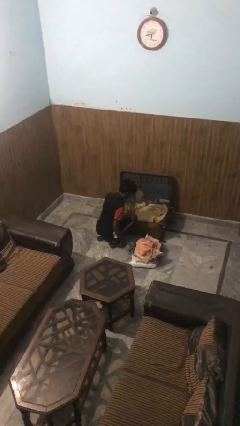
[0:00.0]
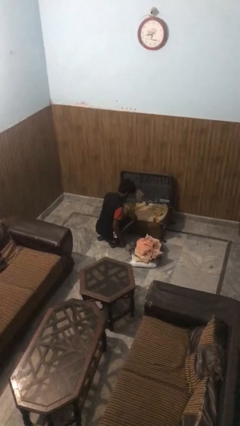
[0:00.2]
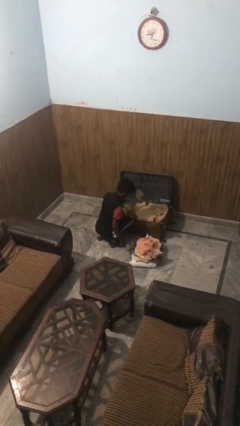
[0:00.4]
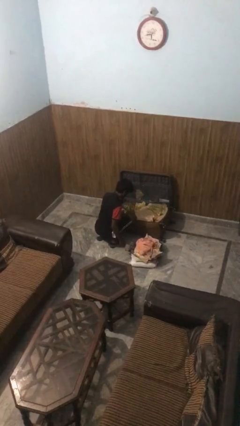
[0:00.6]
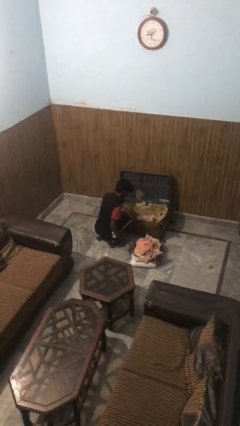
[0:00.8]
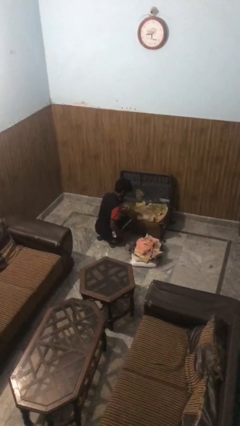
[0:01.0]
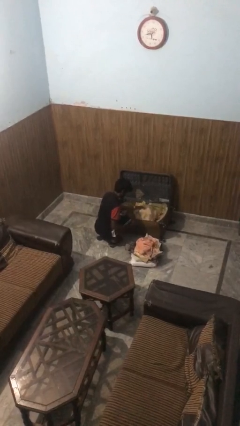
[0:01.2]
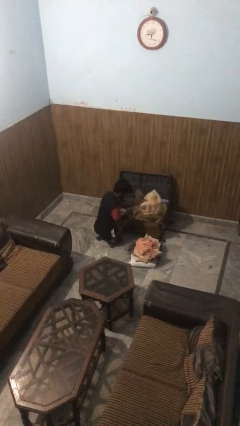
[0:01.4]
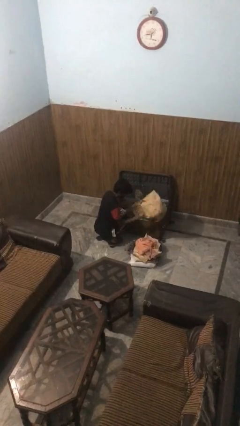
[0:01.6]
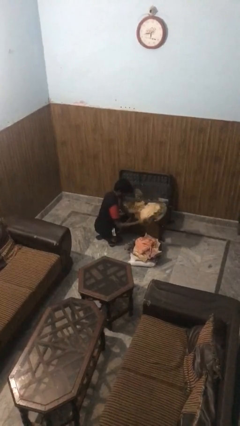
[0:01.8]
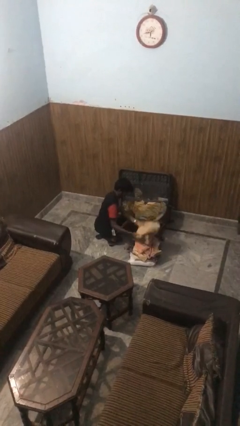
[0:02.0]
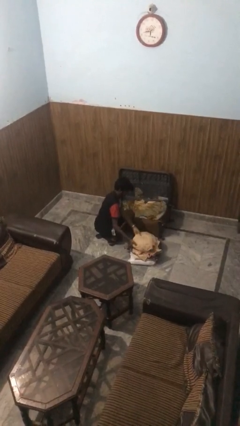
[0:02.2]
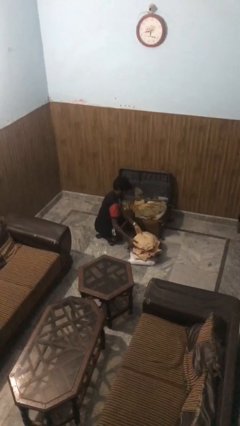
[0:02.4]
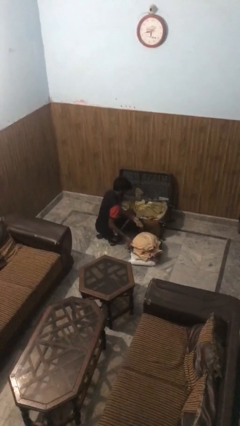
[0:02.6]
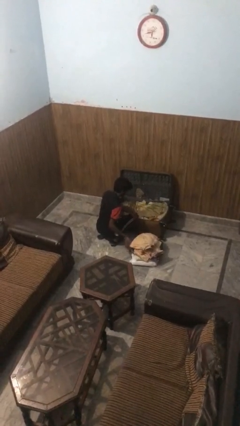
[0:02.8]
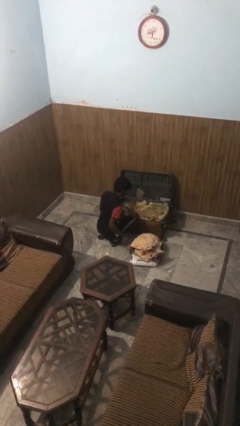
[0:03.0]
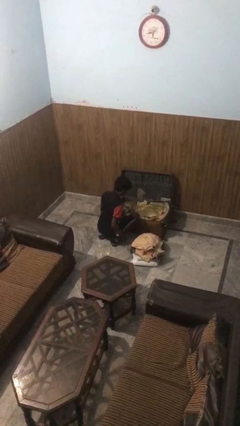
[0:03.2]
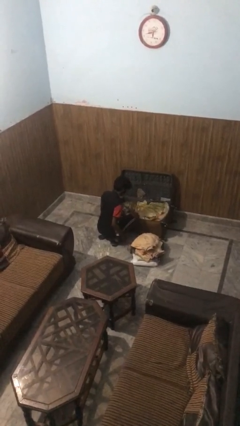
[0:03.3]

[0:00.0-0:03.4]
person unloads clothes from suitcase

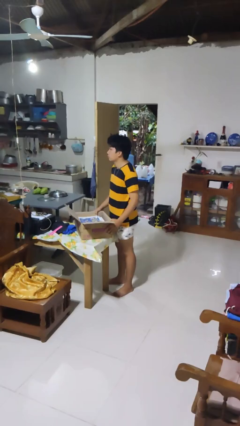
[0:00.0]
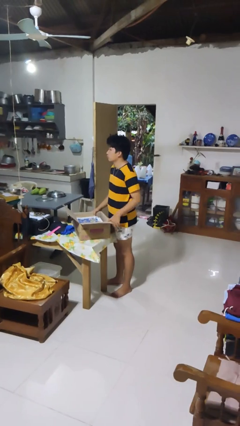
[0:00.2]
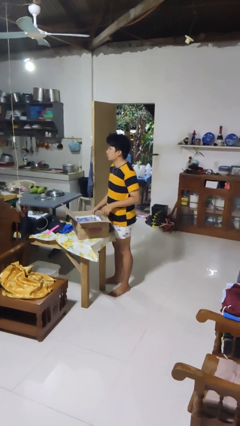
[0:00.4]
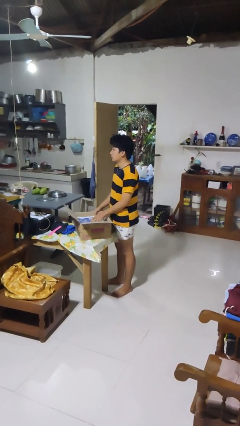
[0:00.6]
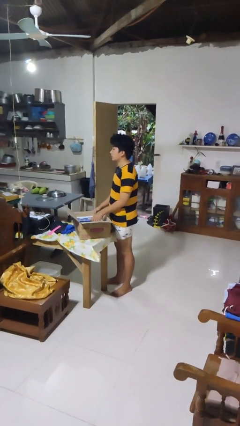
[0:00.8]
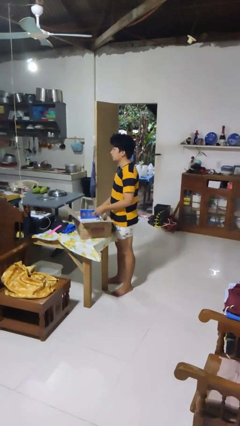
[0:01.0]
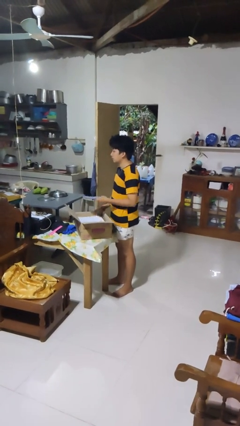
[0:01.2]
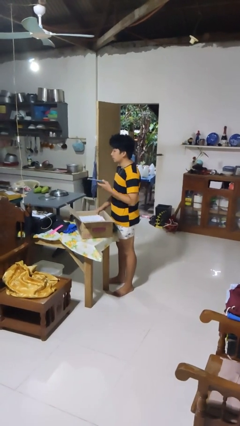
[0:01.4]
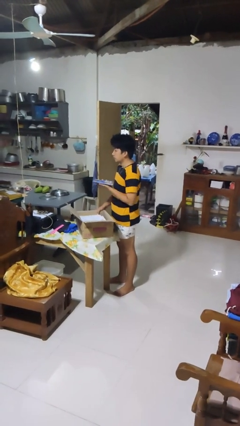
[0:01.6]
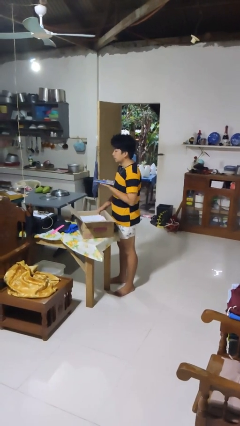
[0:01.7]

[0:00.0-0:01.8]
person takes object from box

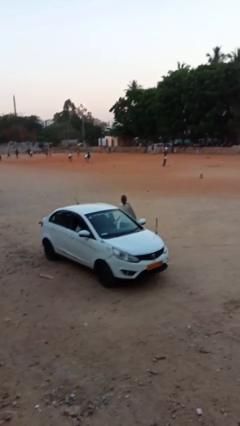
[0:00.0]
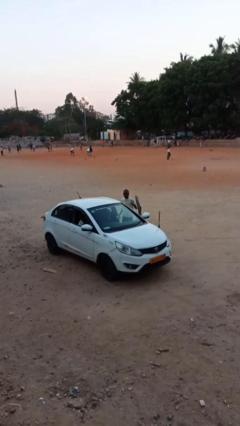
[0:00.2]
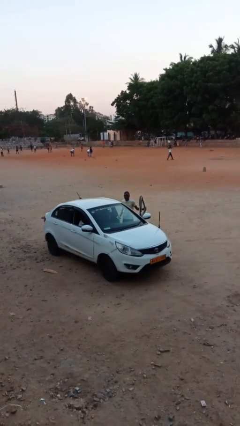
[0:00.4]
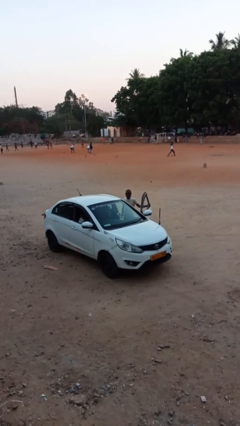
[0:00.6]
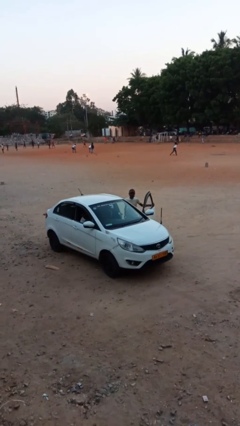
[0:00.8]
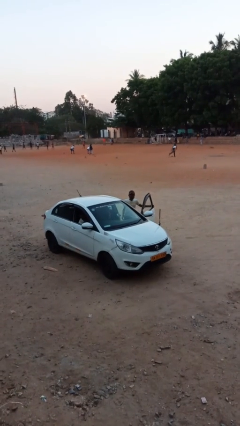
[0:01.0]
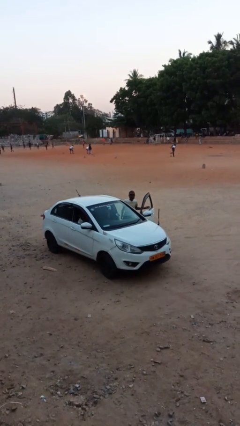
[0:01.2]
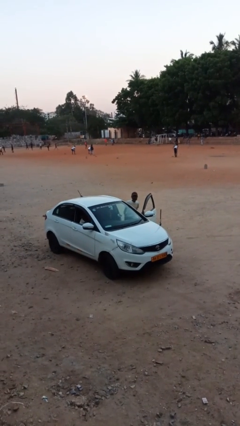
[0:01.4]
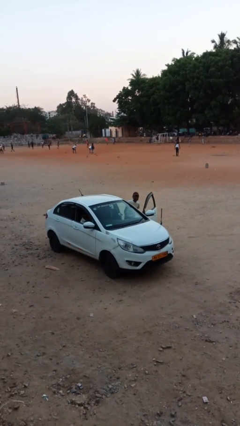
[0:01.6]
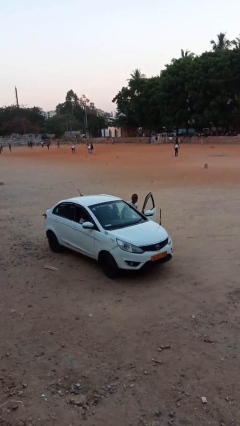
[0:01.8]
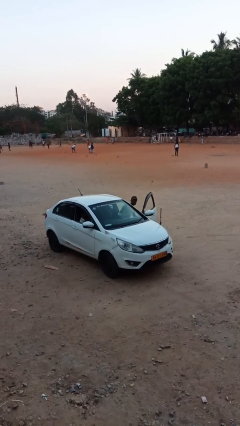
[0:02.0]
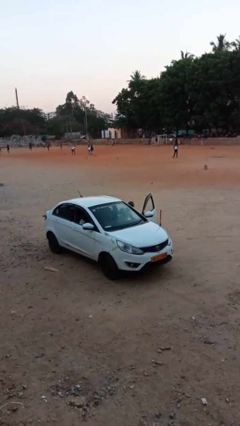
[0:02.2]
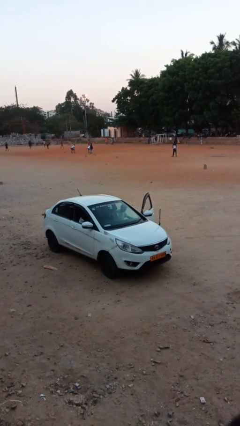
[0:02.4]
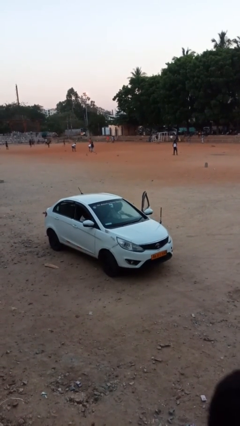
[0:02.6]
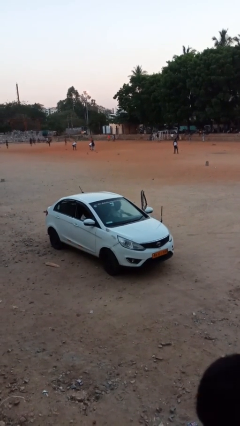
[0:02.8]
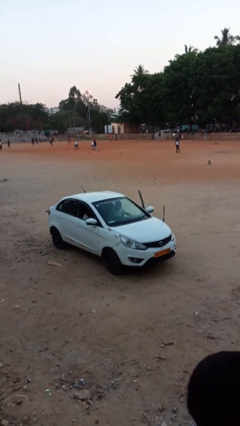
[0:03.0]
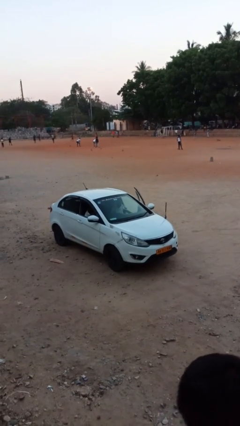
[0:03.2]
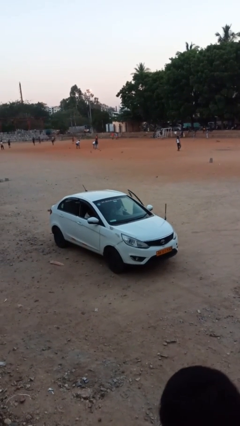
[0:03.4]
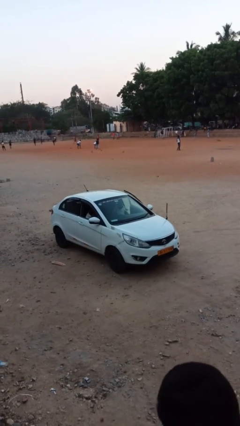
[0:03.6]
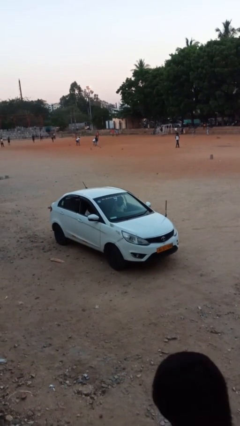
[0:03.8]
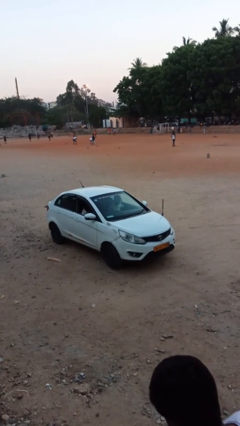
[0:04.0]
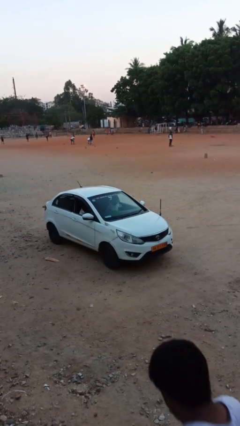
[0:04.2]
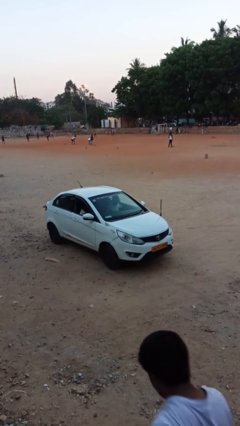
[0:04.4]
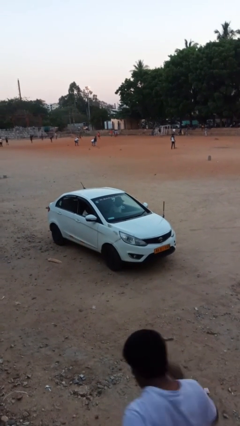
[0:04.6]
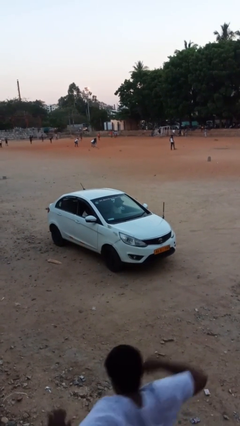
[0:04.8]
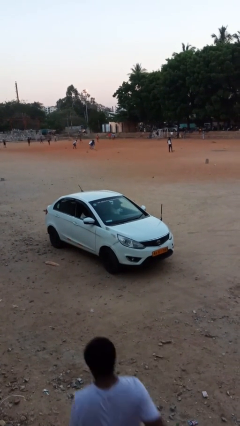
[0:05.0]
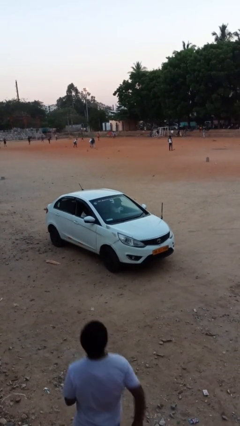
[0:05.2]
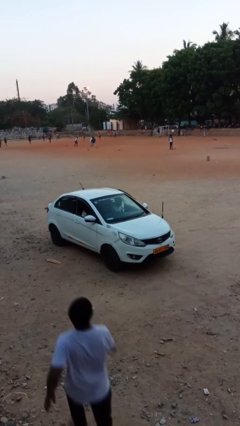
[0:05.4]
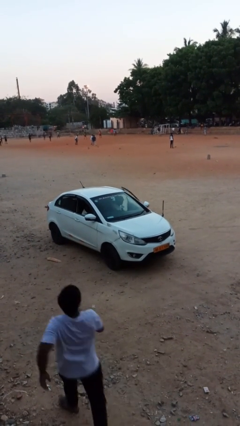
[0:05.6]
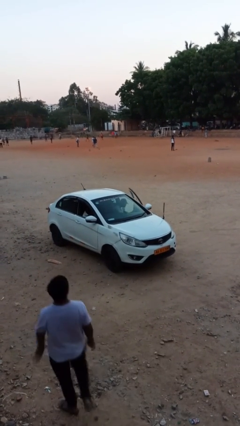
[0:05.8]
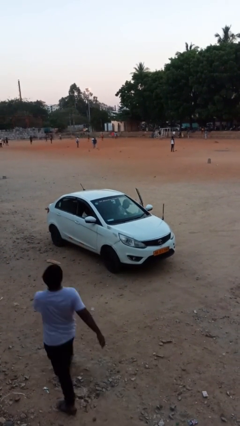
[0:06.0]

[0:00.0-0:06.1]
person enters car

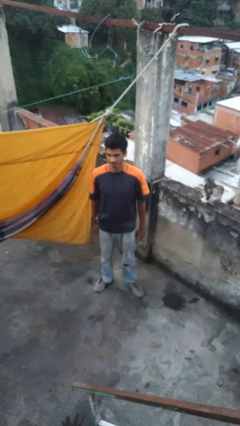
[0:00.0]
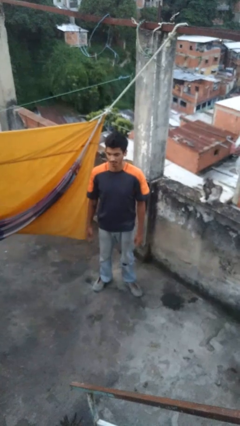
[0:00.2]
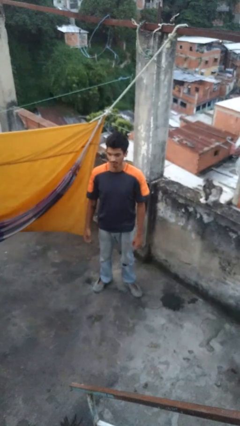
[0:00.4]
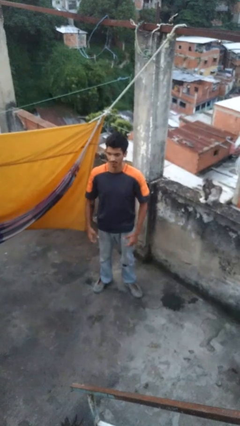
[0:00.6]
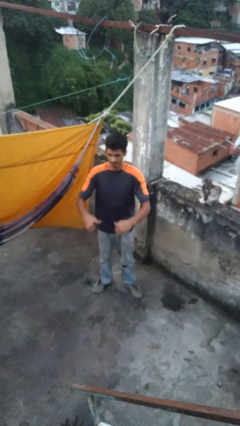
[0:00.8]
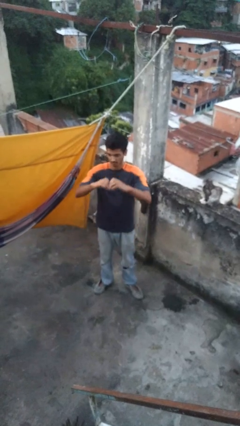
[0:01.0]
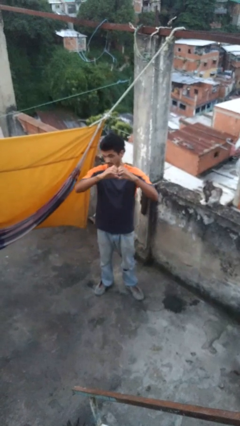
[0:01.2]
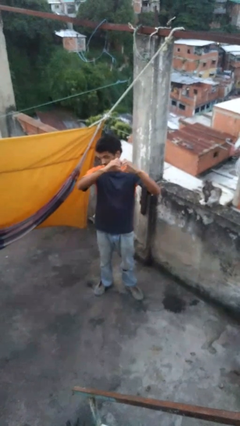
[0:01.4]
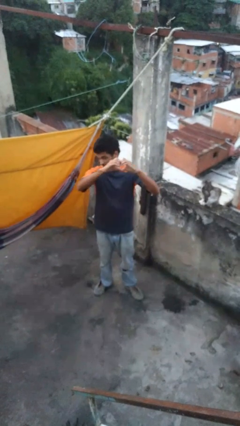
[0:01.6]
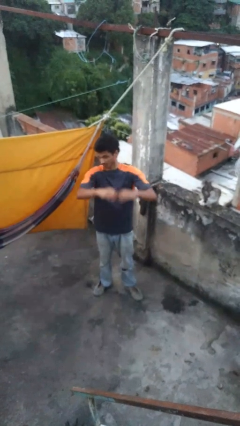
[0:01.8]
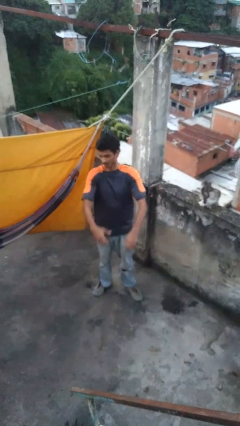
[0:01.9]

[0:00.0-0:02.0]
person gestures heart

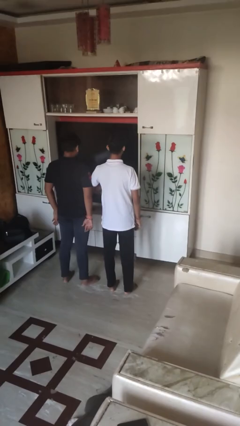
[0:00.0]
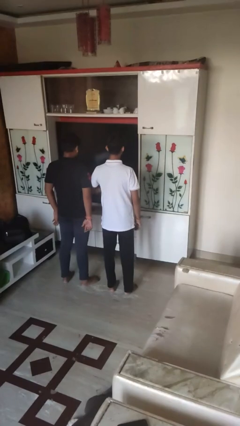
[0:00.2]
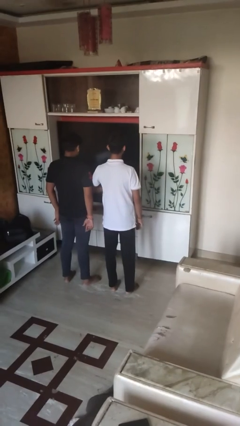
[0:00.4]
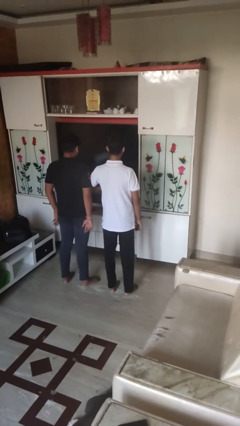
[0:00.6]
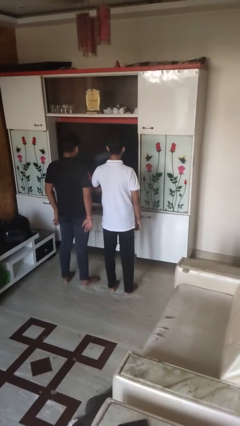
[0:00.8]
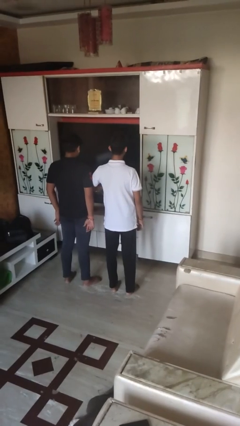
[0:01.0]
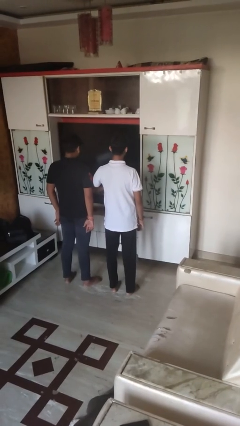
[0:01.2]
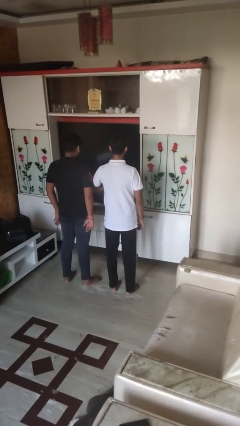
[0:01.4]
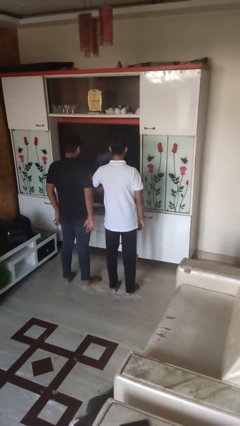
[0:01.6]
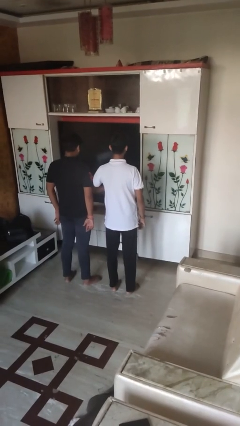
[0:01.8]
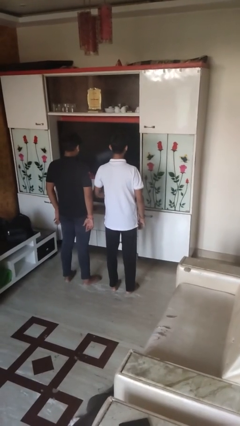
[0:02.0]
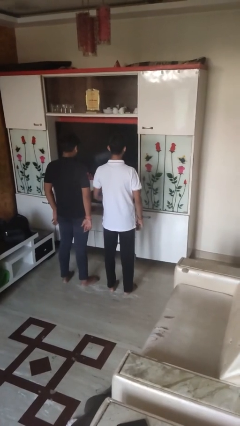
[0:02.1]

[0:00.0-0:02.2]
person nudges person with elbow

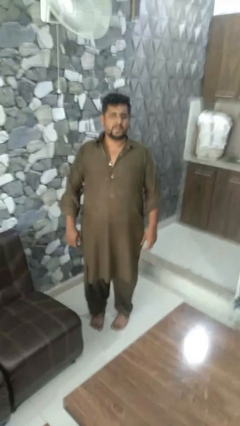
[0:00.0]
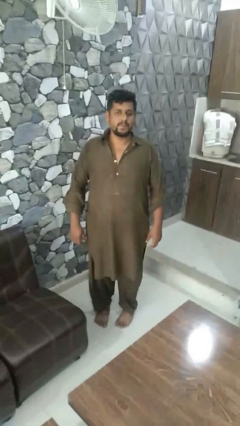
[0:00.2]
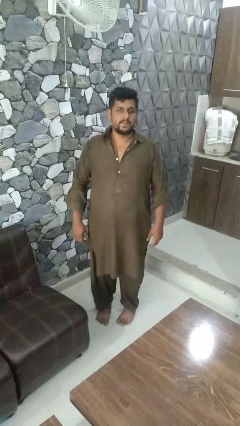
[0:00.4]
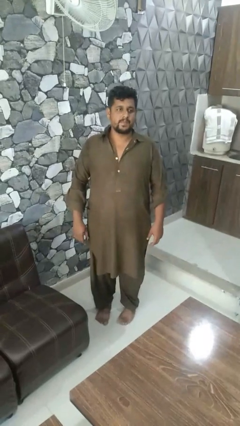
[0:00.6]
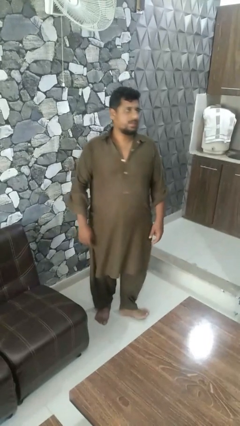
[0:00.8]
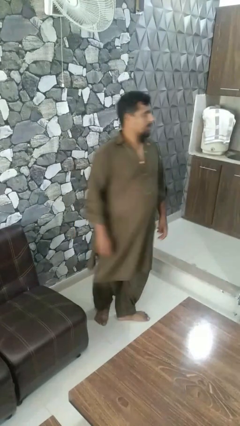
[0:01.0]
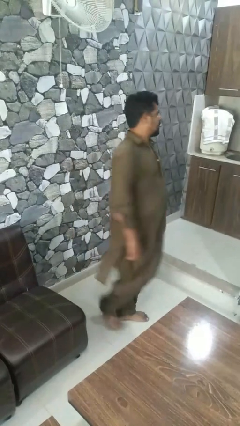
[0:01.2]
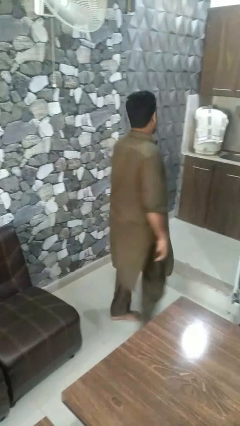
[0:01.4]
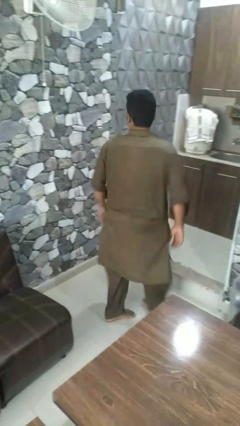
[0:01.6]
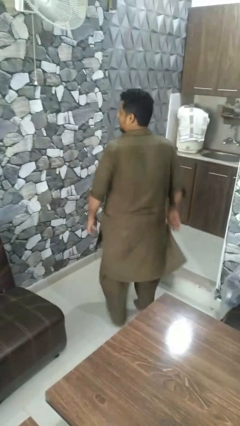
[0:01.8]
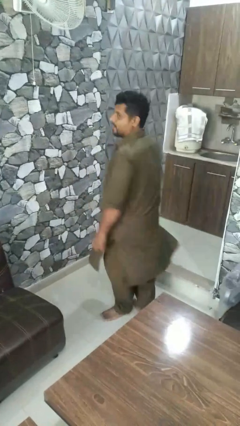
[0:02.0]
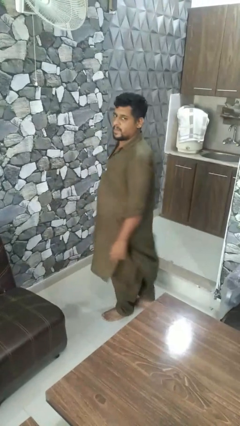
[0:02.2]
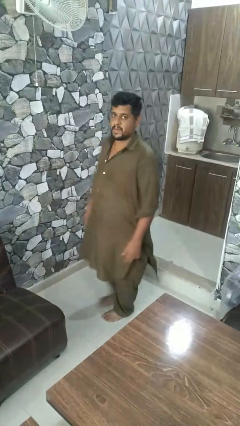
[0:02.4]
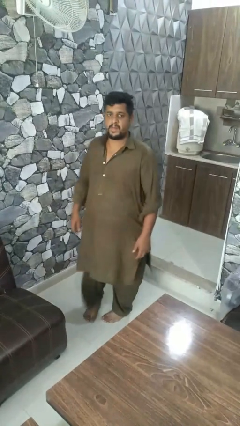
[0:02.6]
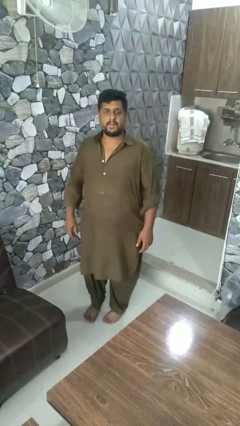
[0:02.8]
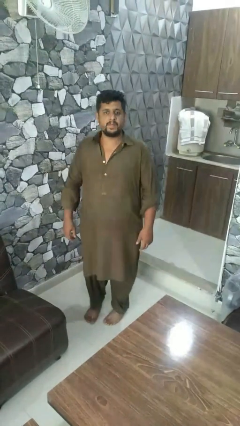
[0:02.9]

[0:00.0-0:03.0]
person twirls
